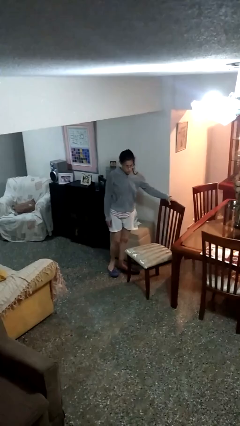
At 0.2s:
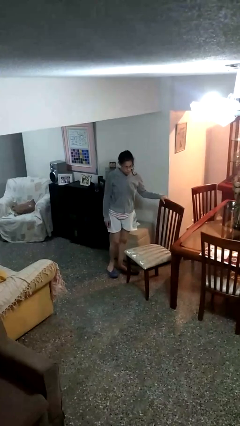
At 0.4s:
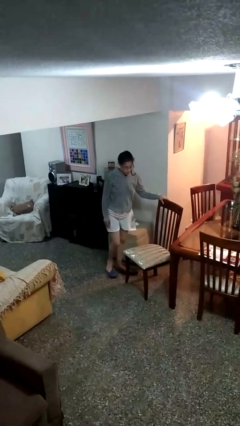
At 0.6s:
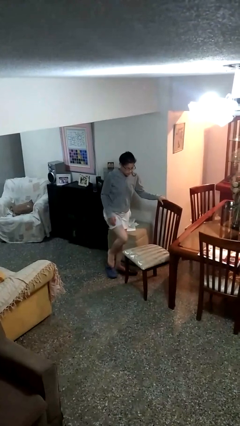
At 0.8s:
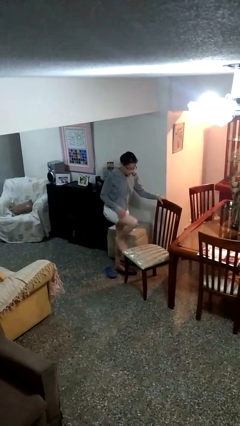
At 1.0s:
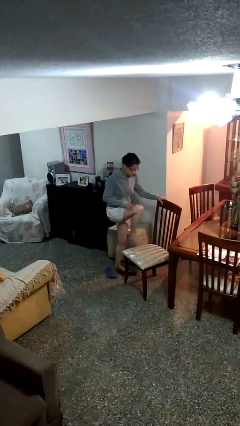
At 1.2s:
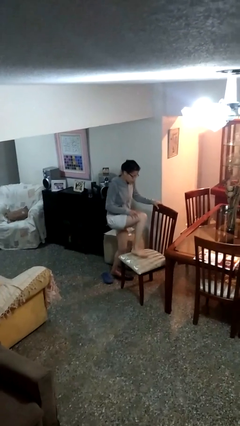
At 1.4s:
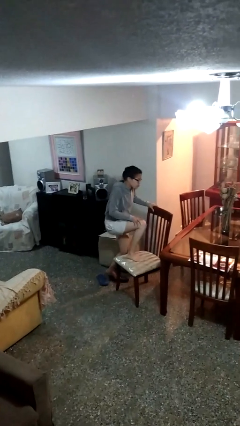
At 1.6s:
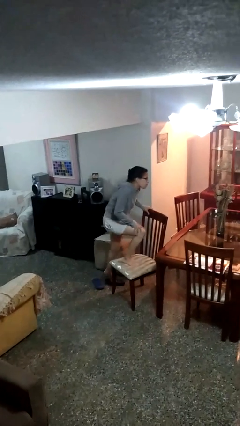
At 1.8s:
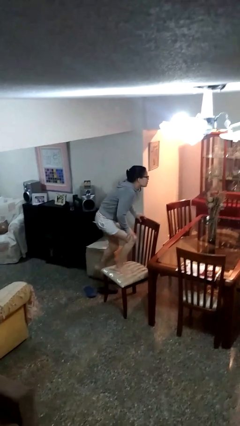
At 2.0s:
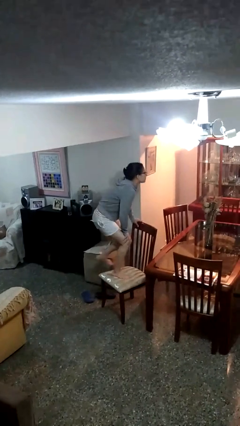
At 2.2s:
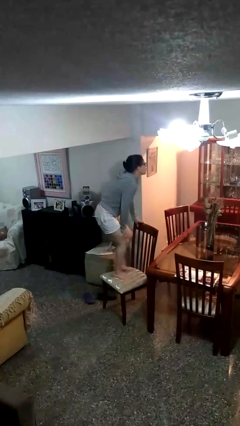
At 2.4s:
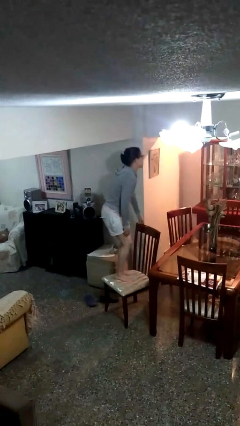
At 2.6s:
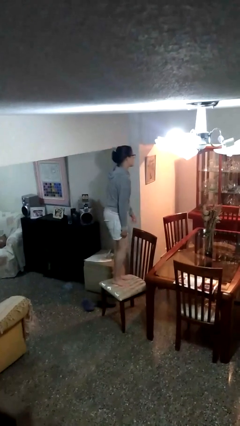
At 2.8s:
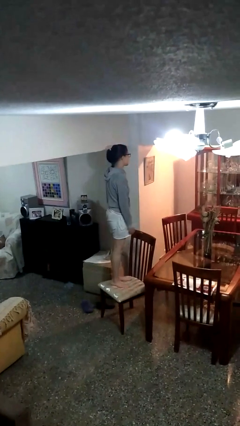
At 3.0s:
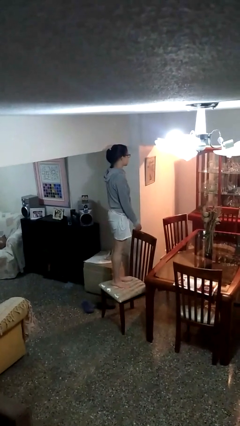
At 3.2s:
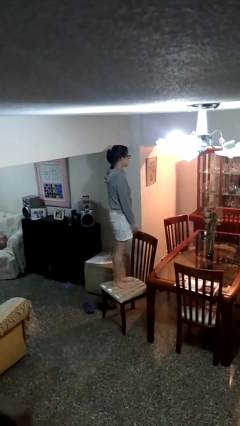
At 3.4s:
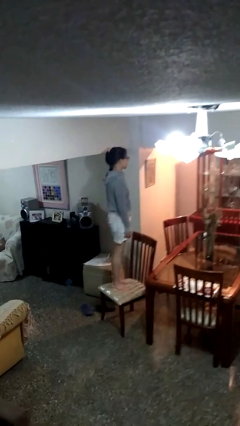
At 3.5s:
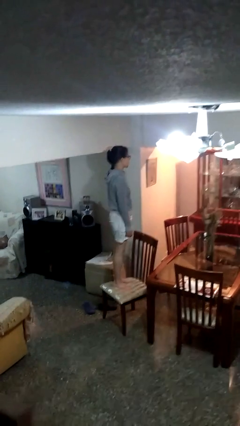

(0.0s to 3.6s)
person climbs on chair

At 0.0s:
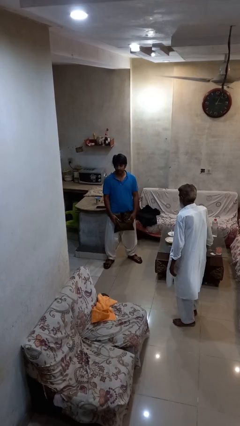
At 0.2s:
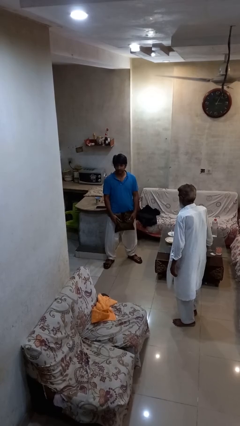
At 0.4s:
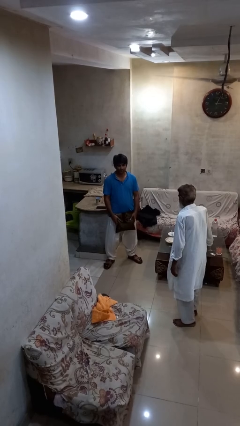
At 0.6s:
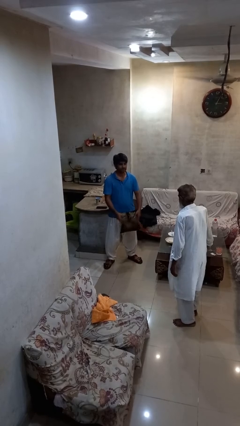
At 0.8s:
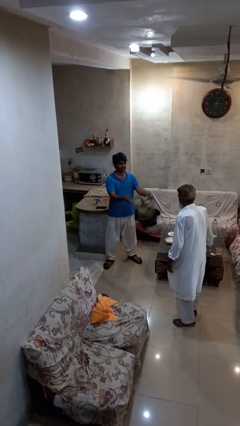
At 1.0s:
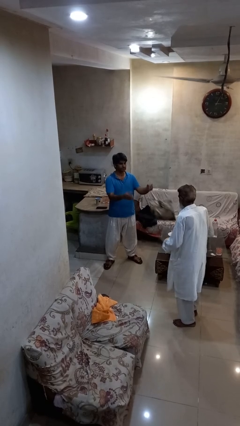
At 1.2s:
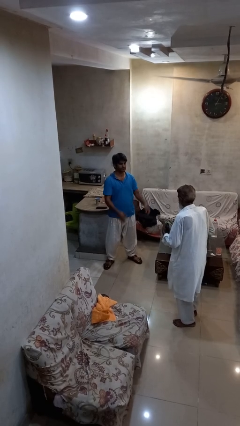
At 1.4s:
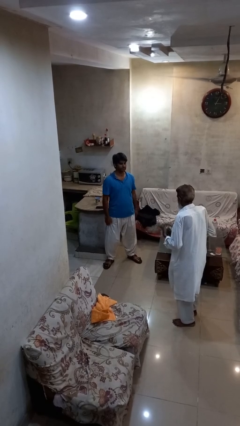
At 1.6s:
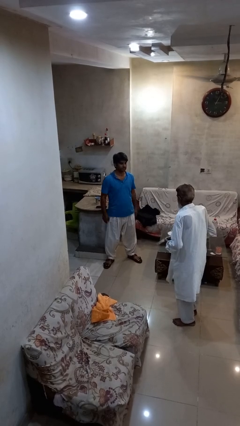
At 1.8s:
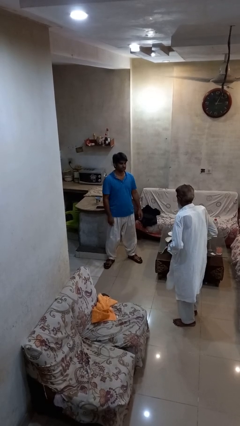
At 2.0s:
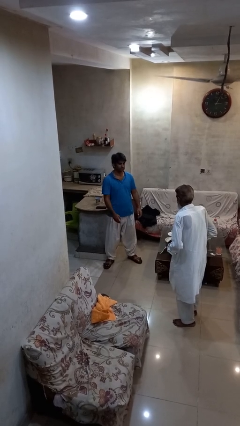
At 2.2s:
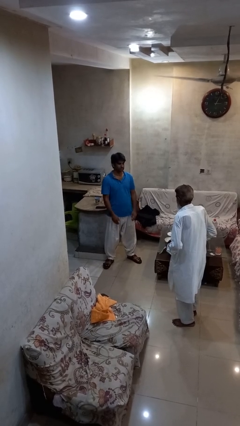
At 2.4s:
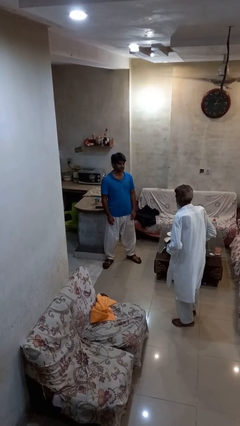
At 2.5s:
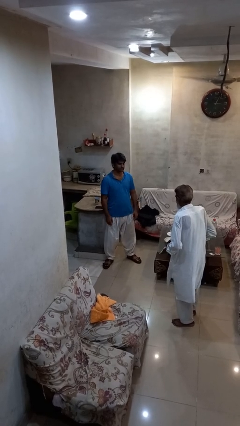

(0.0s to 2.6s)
person throws object to person

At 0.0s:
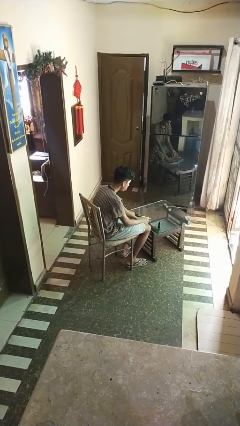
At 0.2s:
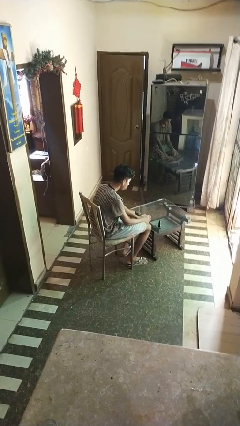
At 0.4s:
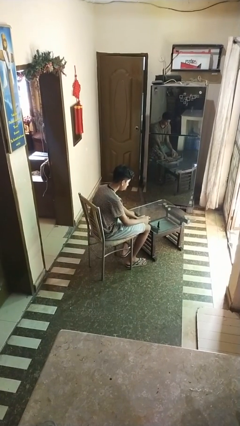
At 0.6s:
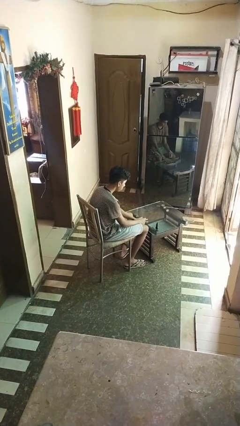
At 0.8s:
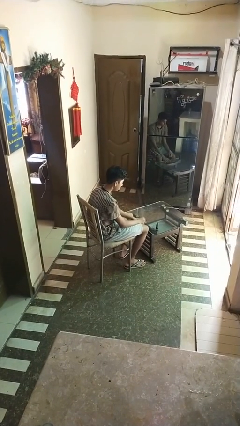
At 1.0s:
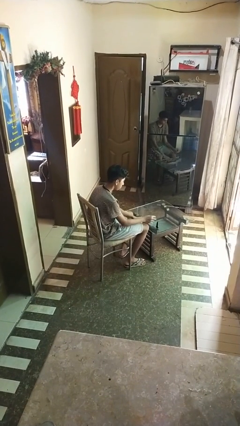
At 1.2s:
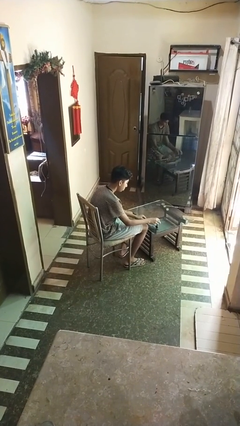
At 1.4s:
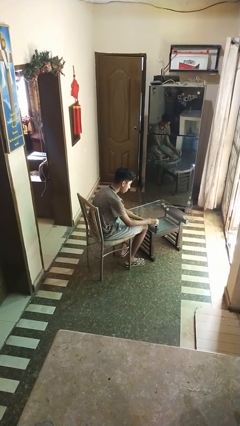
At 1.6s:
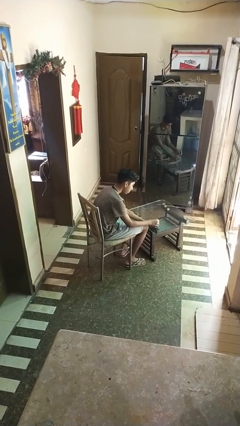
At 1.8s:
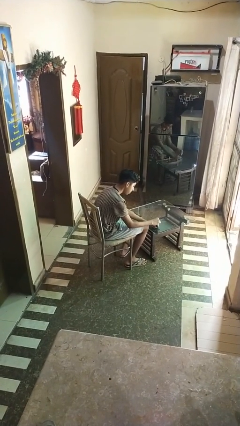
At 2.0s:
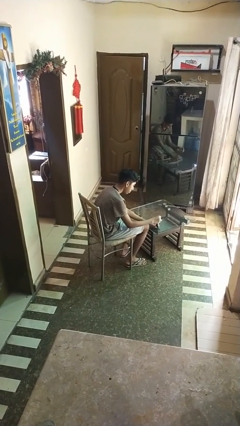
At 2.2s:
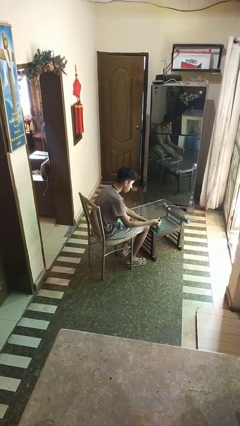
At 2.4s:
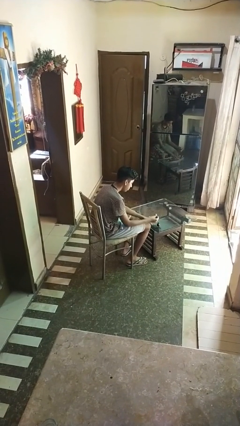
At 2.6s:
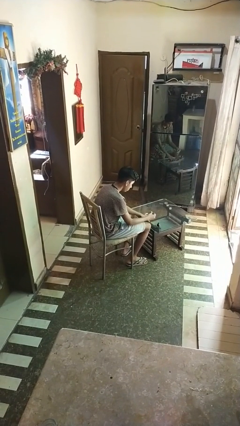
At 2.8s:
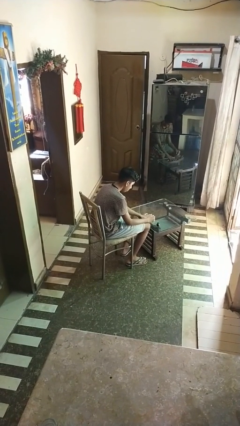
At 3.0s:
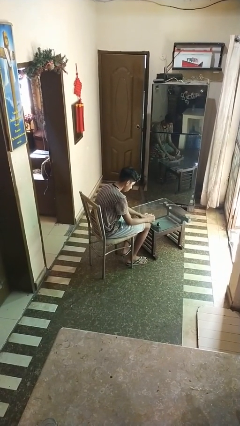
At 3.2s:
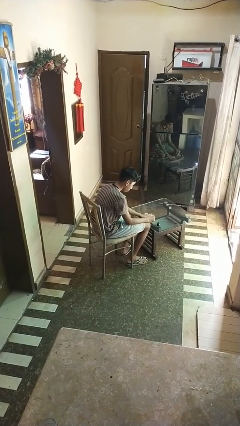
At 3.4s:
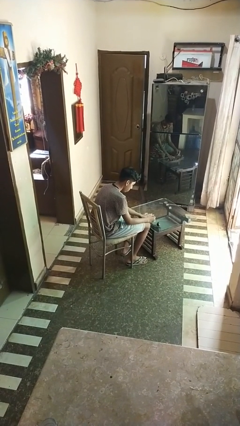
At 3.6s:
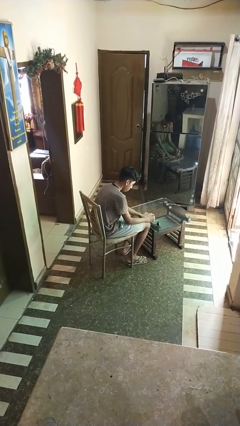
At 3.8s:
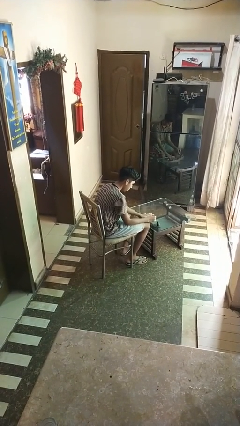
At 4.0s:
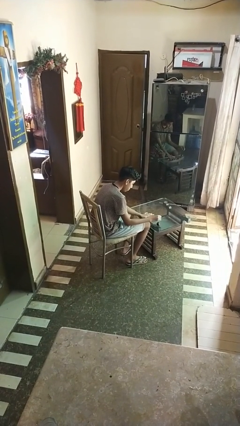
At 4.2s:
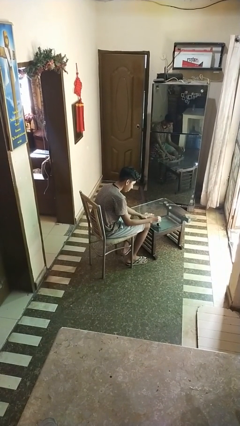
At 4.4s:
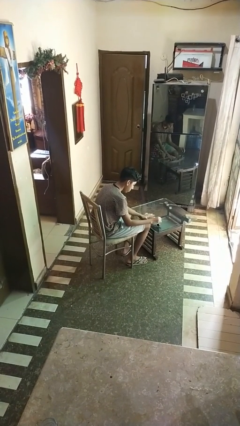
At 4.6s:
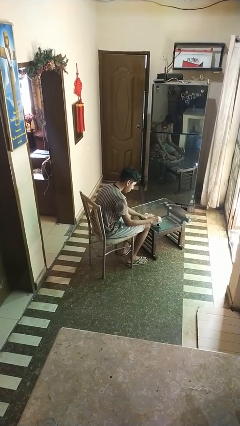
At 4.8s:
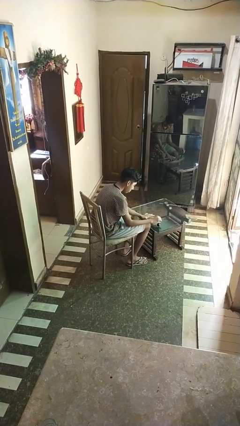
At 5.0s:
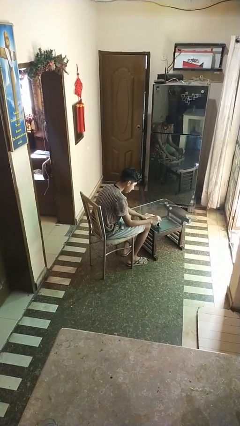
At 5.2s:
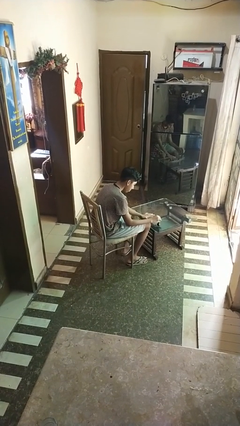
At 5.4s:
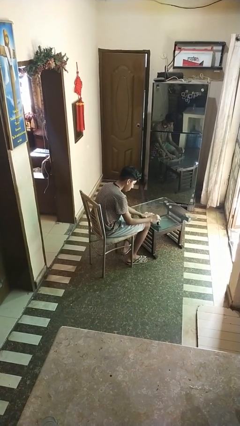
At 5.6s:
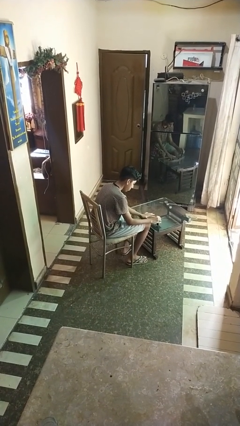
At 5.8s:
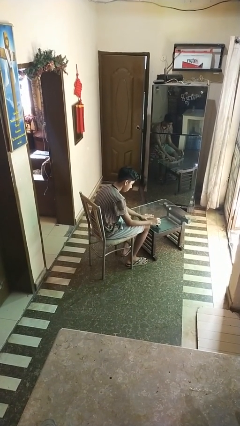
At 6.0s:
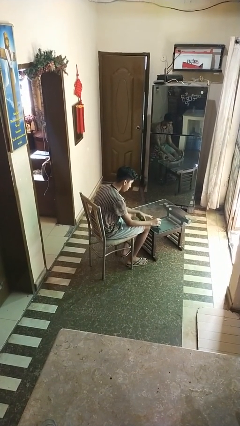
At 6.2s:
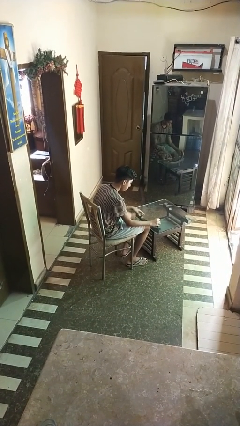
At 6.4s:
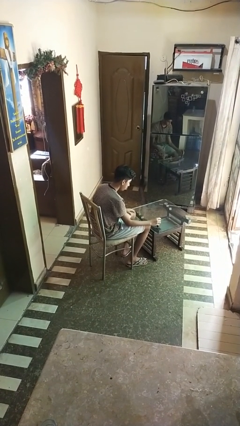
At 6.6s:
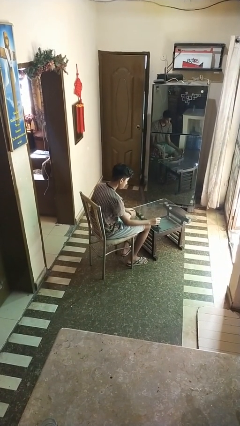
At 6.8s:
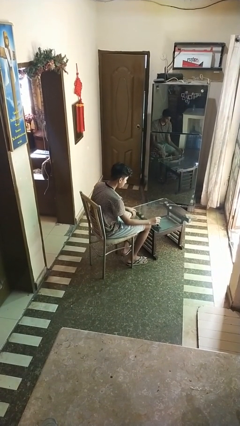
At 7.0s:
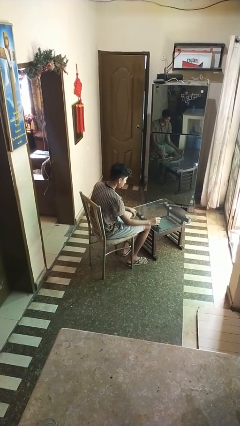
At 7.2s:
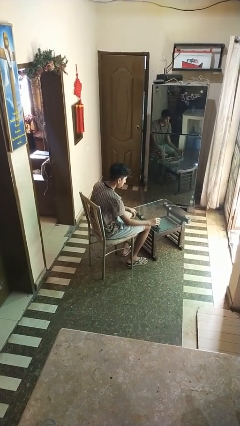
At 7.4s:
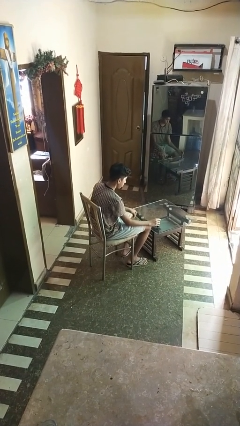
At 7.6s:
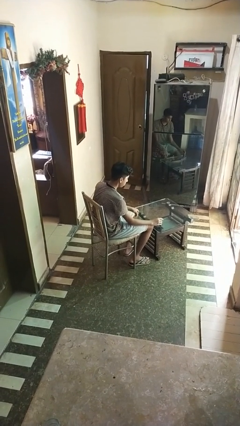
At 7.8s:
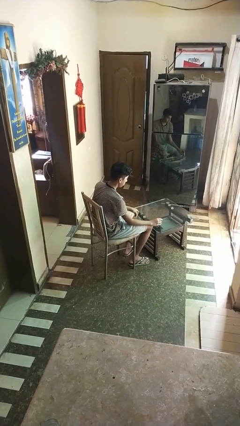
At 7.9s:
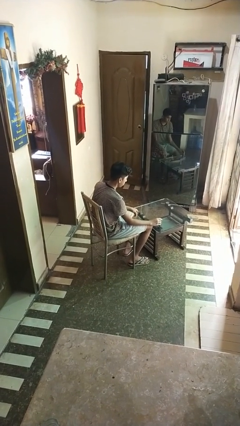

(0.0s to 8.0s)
person paints fingernails

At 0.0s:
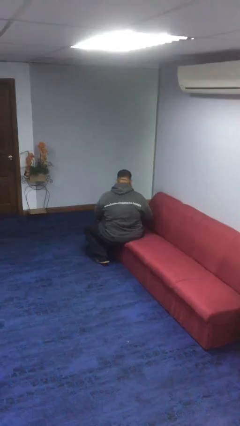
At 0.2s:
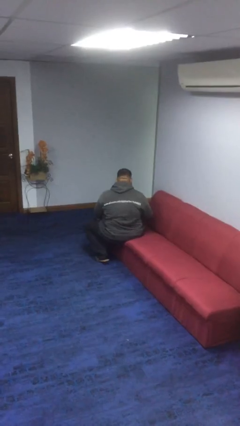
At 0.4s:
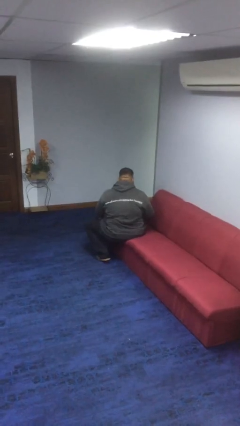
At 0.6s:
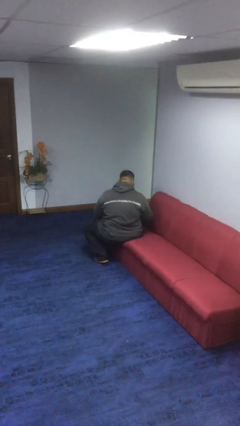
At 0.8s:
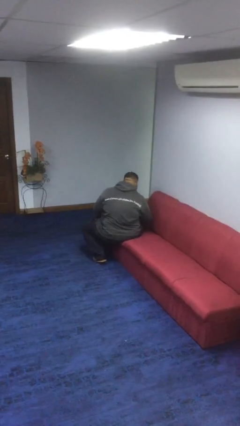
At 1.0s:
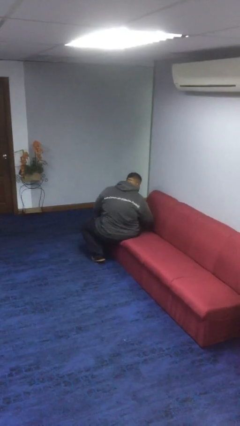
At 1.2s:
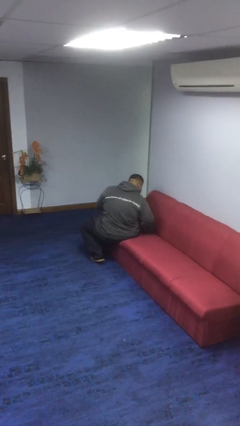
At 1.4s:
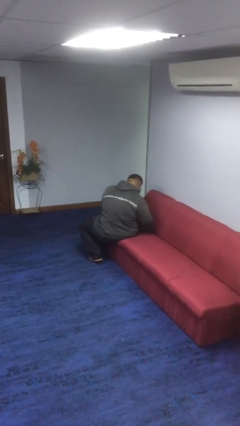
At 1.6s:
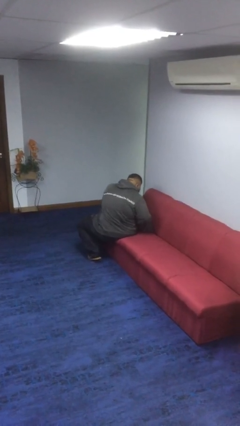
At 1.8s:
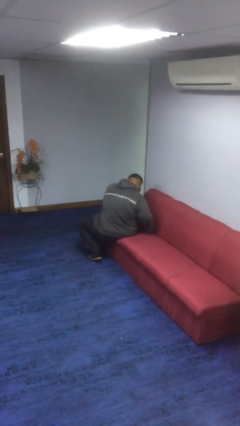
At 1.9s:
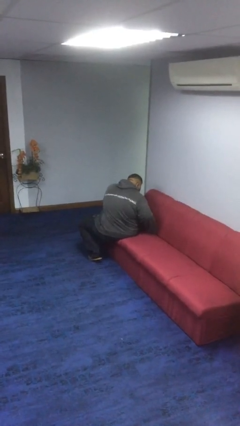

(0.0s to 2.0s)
person searches in couch

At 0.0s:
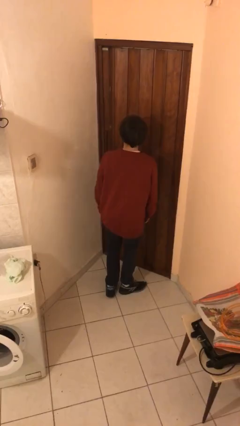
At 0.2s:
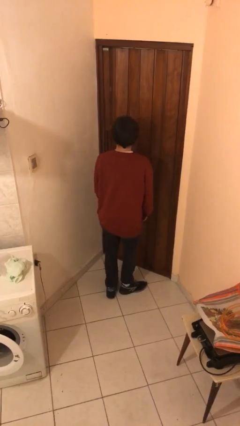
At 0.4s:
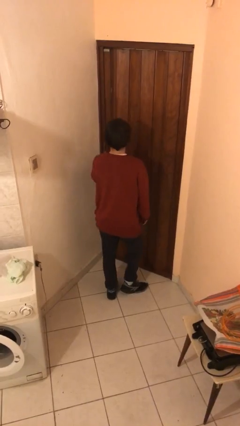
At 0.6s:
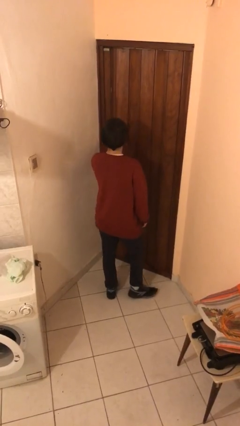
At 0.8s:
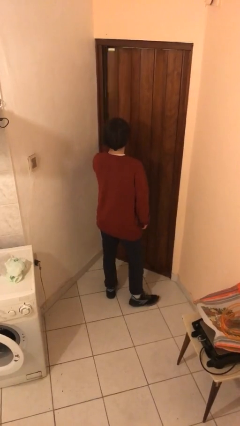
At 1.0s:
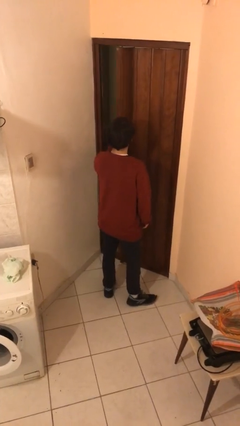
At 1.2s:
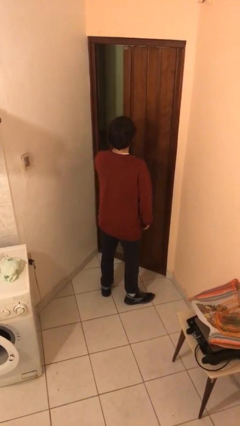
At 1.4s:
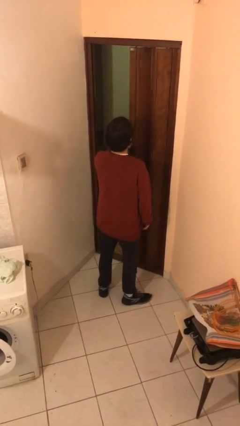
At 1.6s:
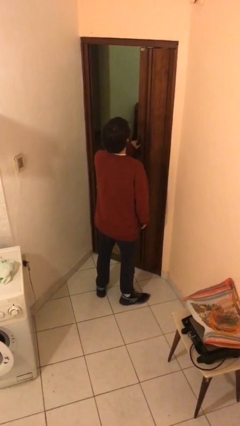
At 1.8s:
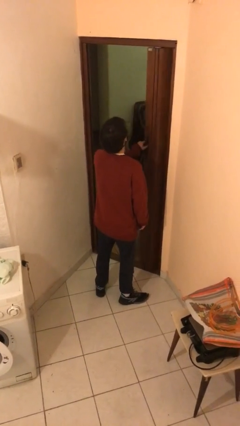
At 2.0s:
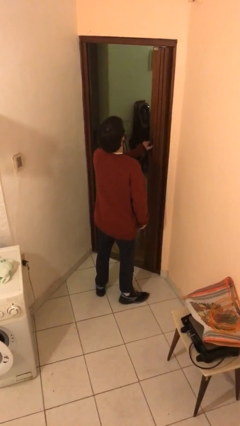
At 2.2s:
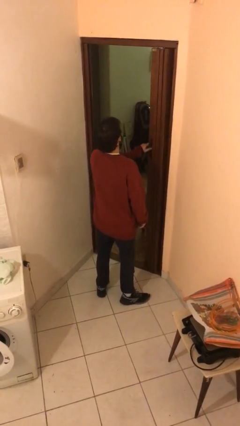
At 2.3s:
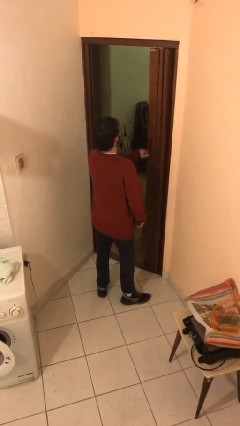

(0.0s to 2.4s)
person opens sliding door
